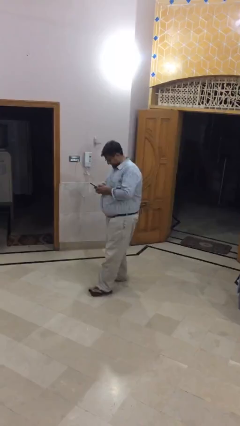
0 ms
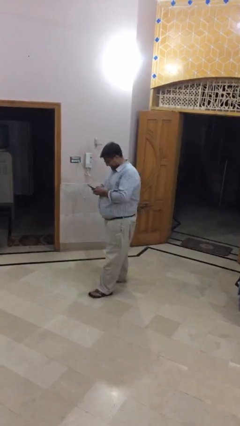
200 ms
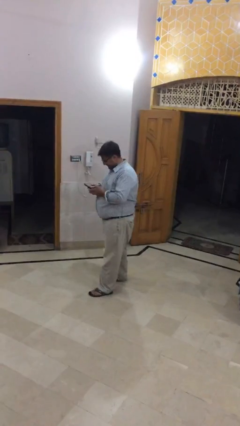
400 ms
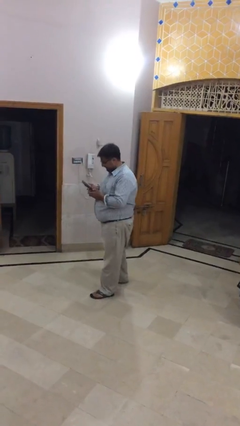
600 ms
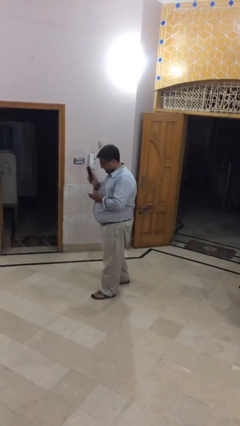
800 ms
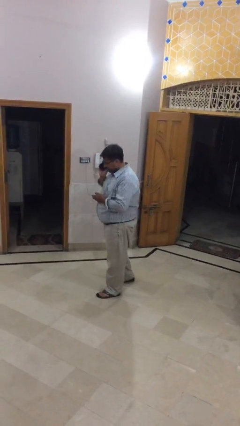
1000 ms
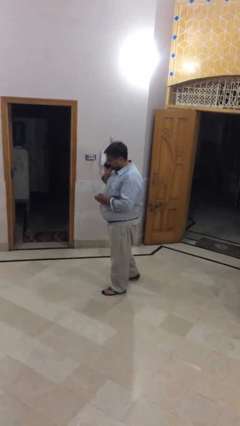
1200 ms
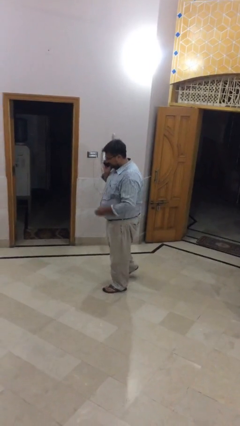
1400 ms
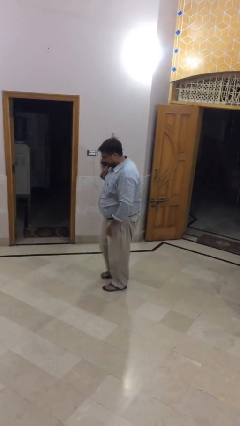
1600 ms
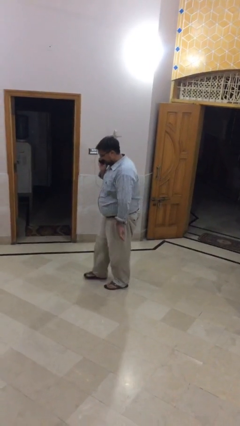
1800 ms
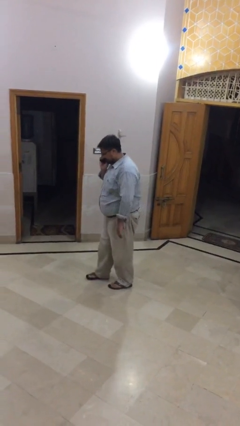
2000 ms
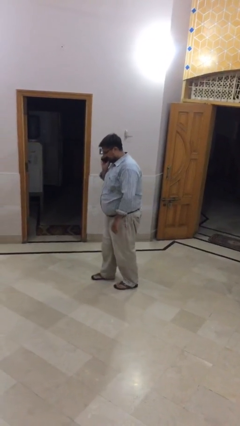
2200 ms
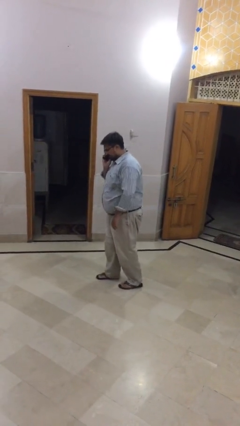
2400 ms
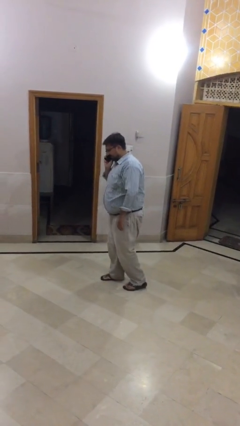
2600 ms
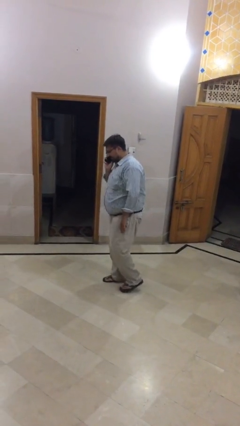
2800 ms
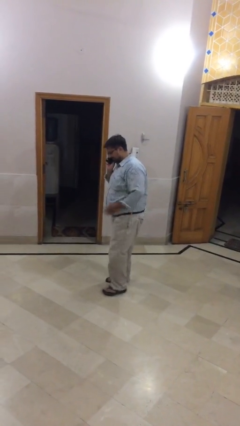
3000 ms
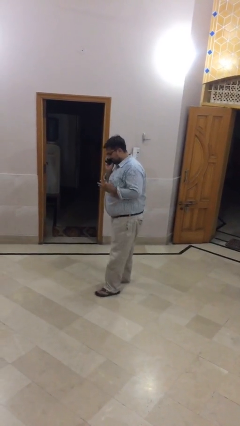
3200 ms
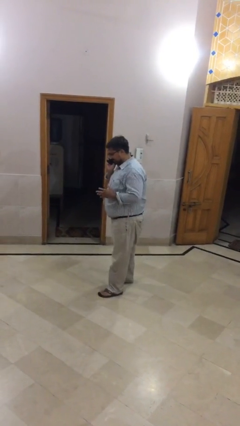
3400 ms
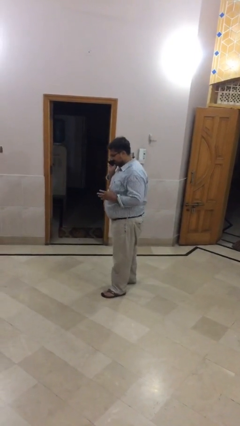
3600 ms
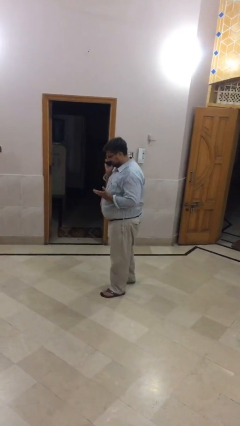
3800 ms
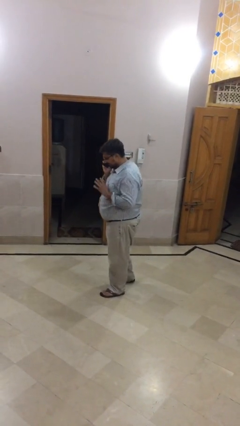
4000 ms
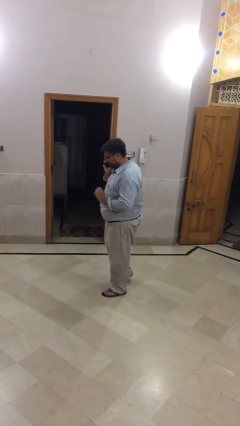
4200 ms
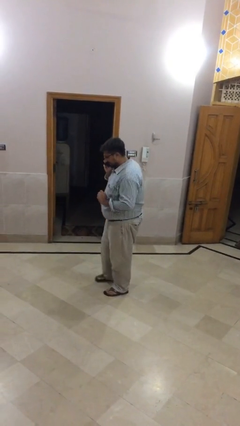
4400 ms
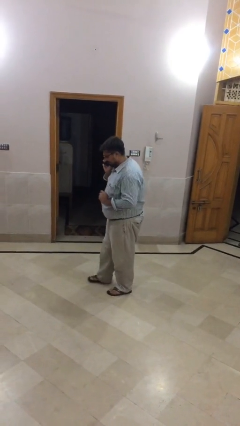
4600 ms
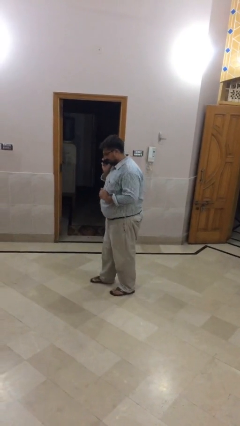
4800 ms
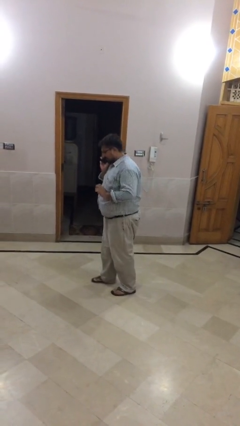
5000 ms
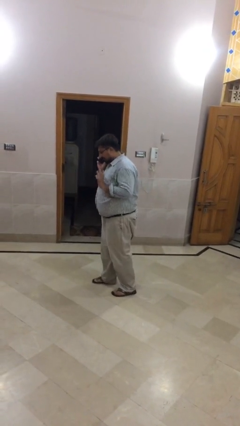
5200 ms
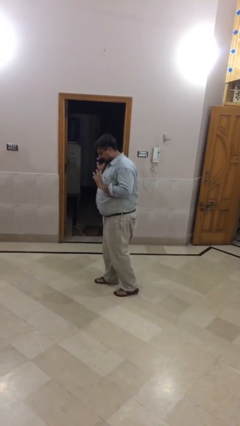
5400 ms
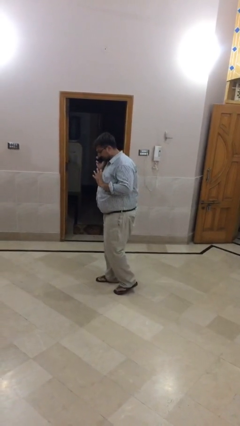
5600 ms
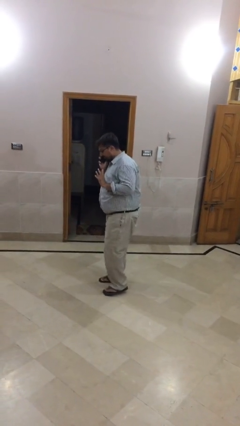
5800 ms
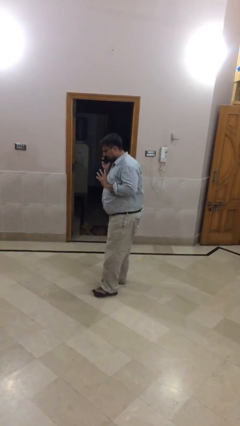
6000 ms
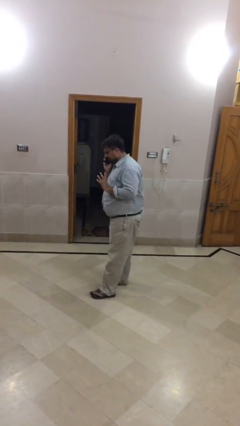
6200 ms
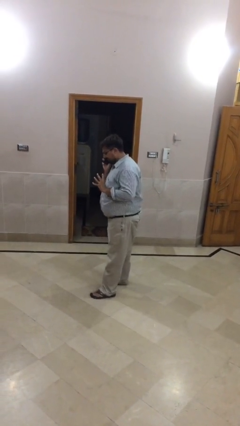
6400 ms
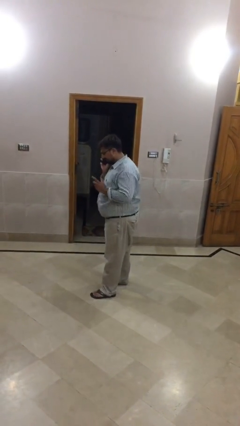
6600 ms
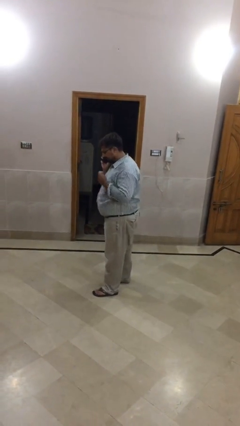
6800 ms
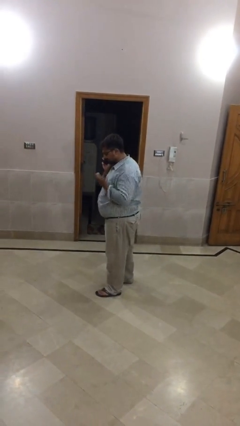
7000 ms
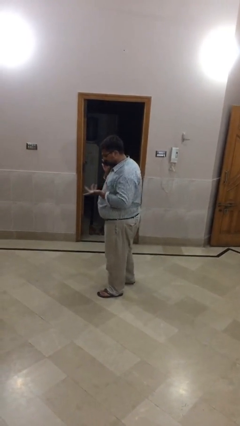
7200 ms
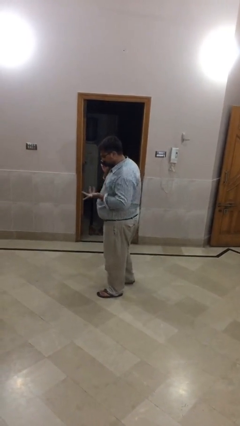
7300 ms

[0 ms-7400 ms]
person talks on phone

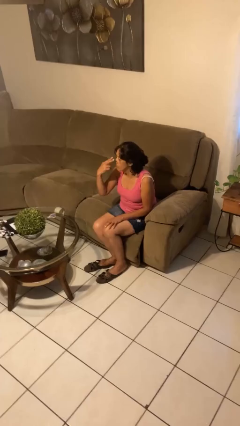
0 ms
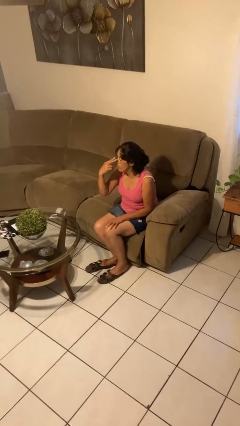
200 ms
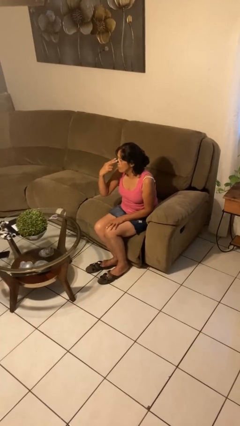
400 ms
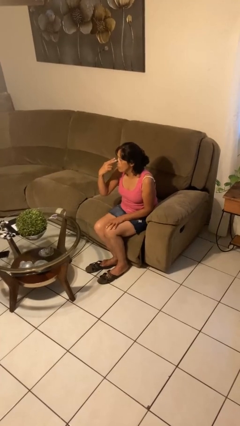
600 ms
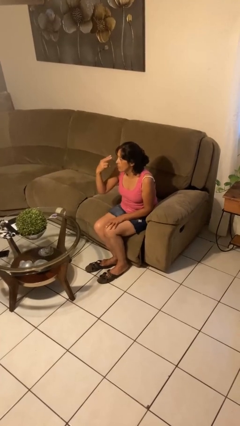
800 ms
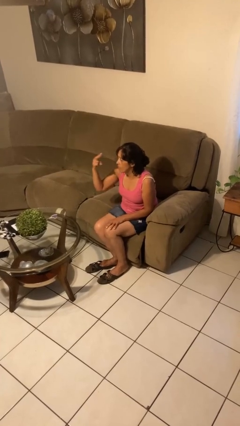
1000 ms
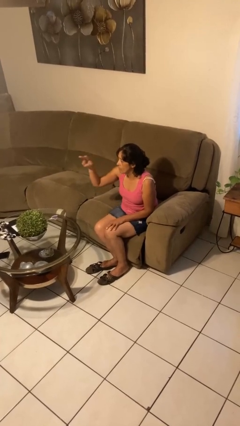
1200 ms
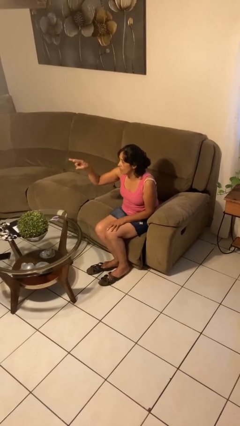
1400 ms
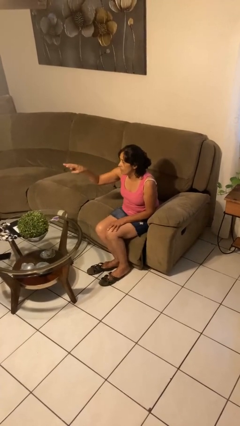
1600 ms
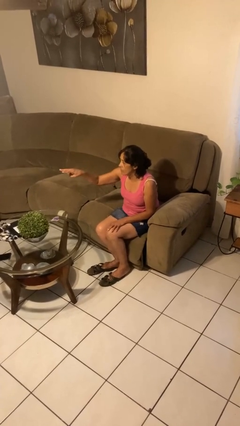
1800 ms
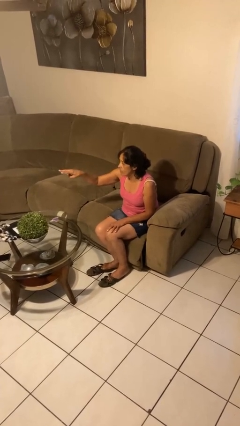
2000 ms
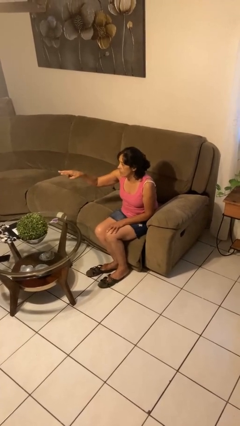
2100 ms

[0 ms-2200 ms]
person gestures watch closely

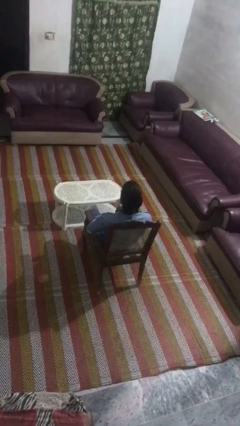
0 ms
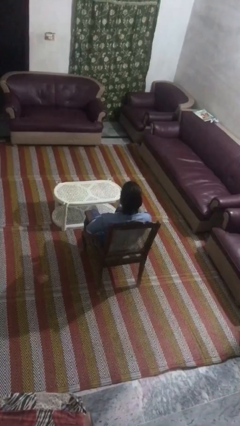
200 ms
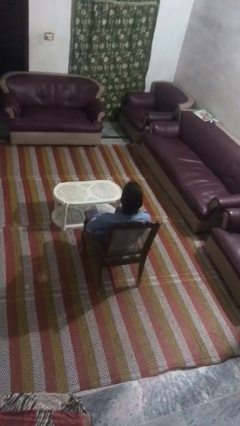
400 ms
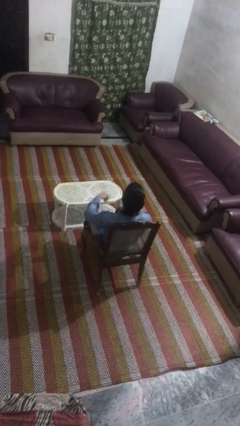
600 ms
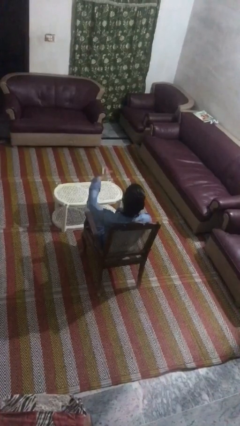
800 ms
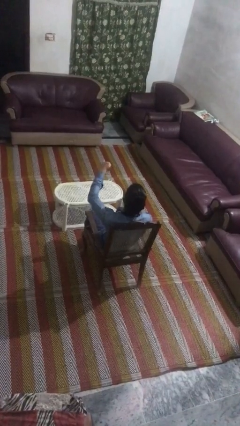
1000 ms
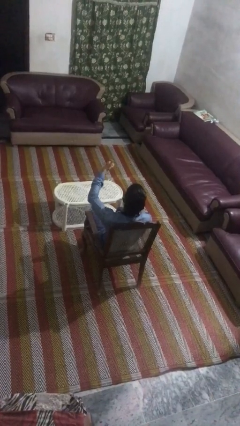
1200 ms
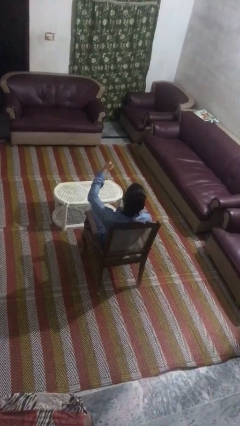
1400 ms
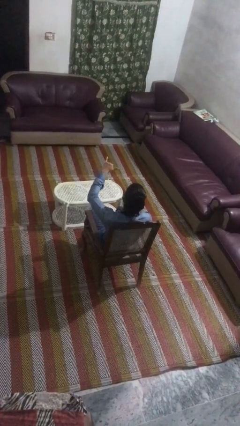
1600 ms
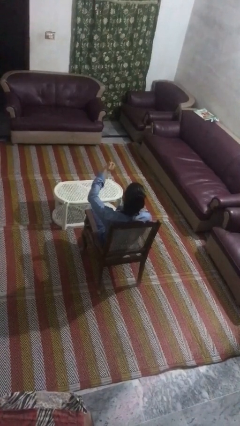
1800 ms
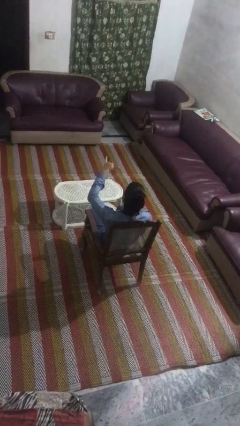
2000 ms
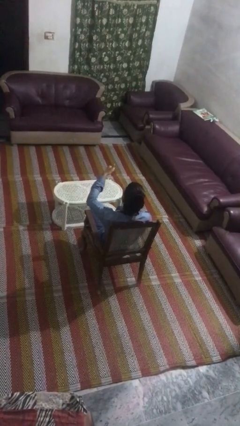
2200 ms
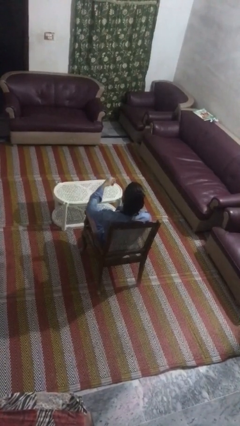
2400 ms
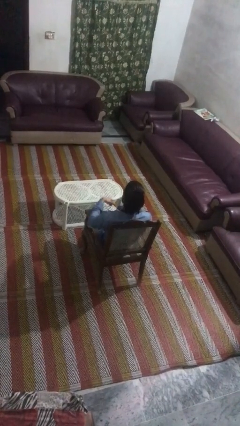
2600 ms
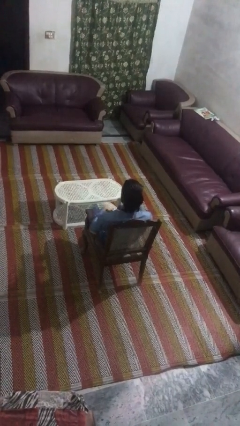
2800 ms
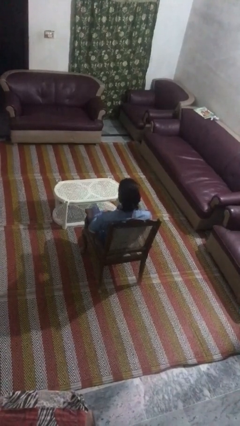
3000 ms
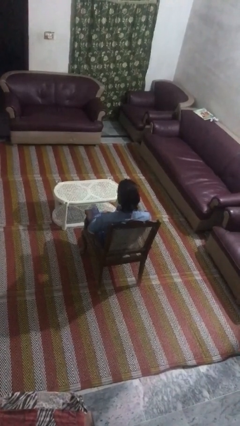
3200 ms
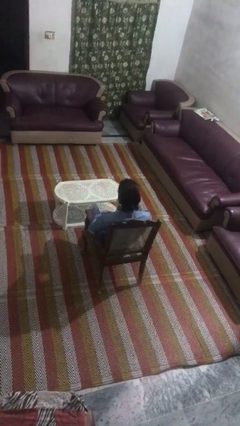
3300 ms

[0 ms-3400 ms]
person gestures hang loose

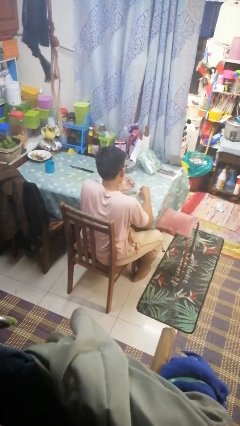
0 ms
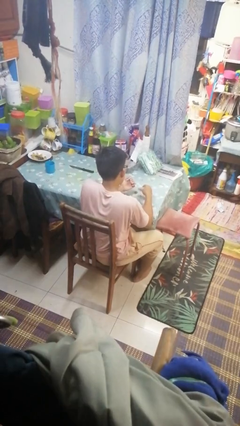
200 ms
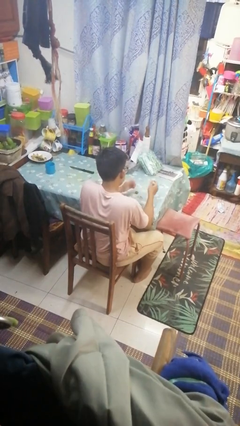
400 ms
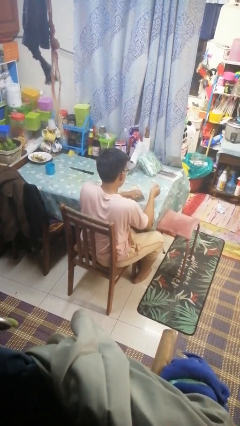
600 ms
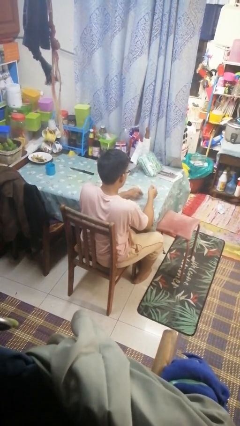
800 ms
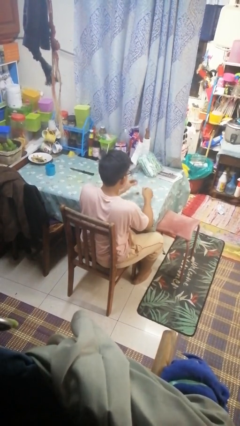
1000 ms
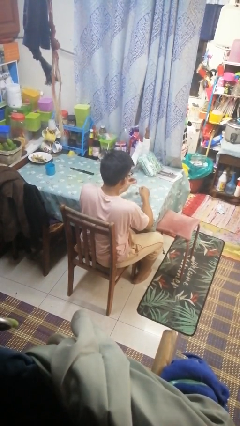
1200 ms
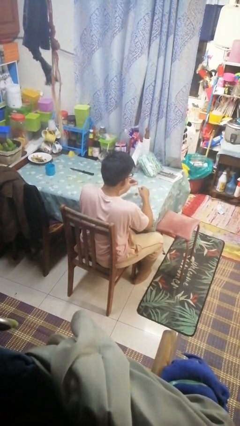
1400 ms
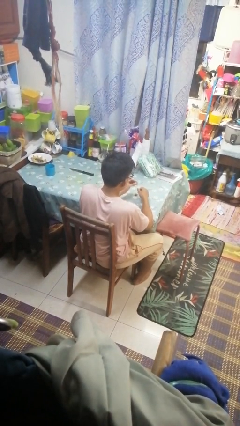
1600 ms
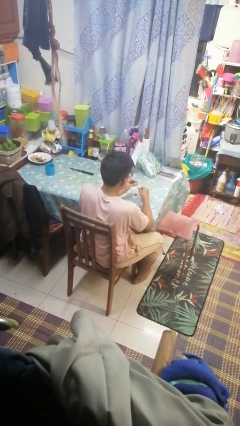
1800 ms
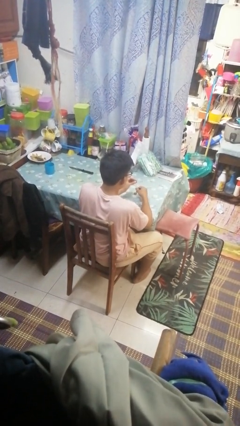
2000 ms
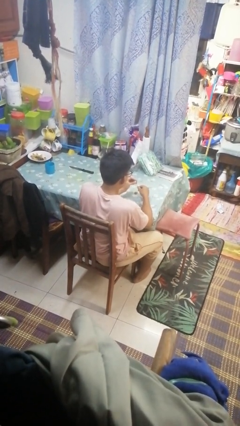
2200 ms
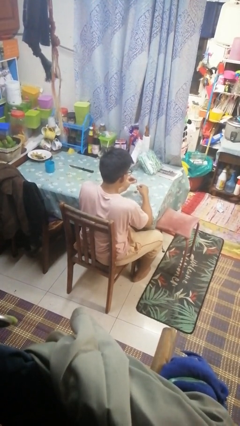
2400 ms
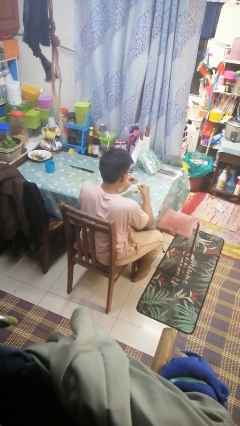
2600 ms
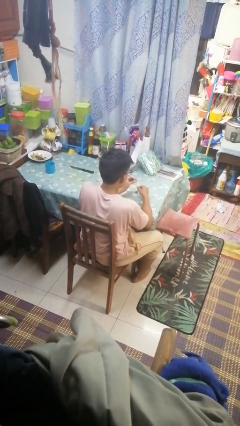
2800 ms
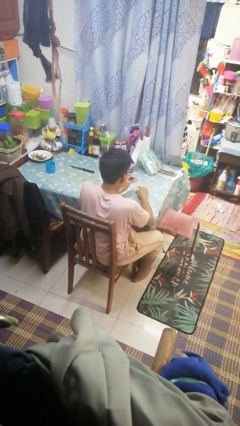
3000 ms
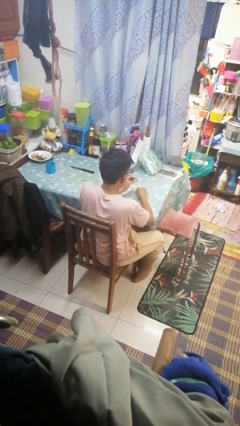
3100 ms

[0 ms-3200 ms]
person paints fingernails

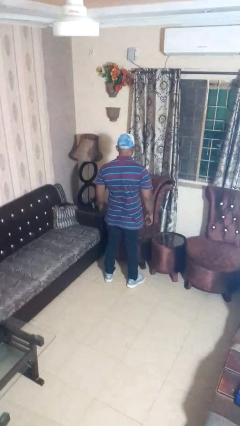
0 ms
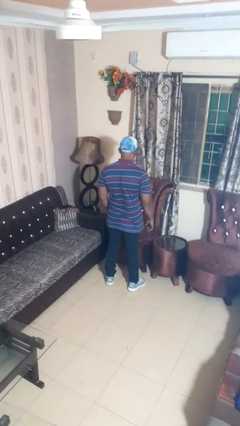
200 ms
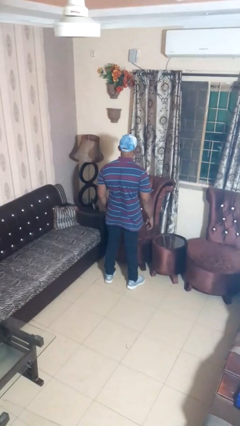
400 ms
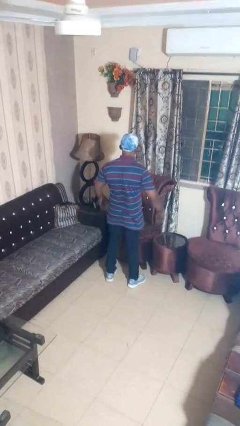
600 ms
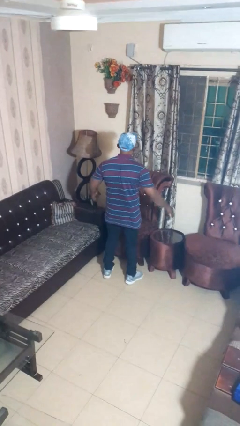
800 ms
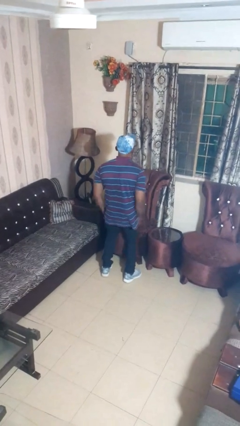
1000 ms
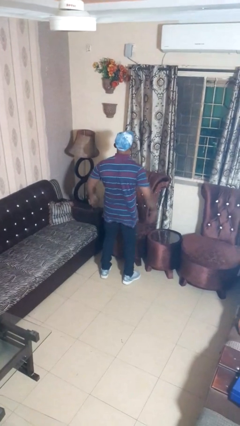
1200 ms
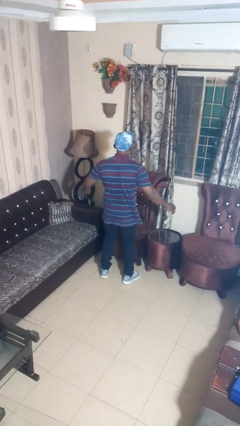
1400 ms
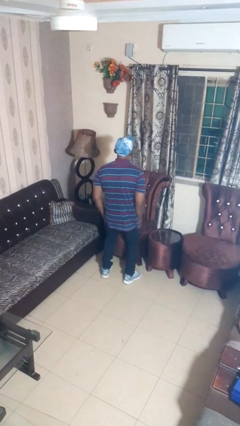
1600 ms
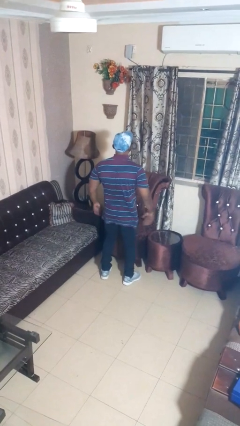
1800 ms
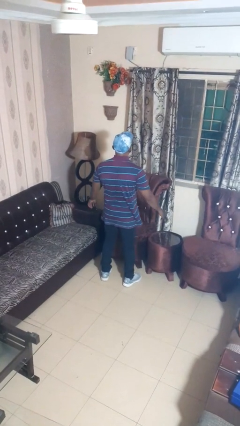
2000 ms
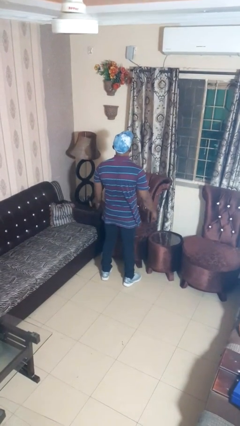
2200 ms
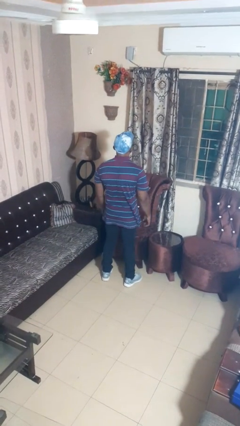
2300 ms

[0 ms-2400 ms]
person slaps hands on thighs
